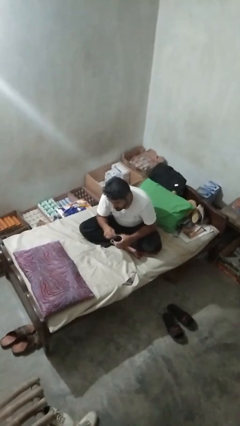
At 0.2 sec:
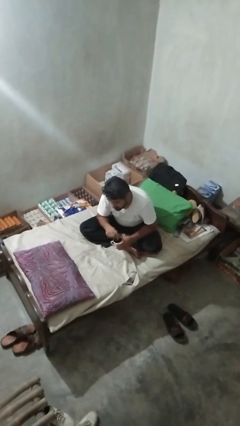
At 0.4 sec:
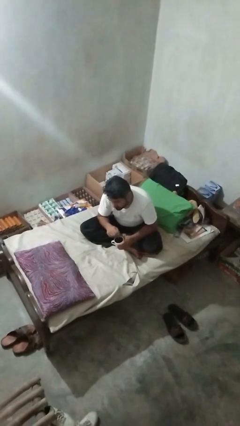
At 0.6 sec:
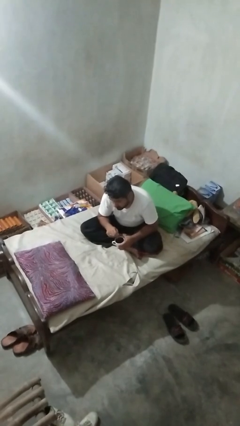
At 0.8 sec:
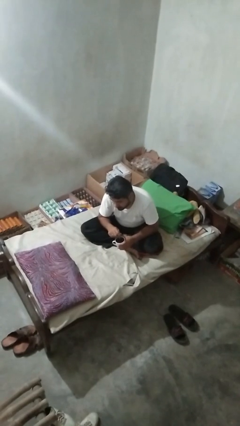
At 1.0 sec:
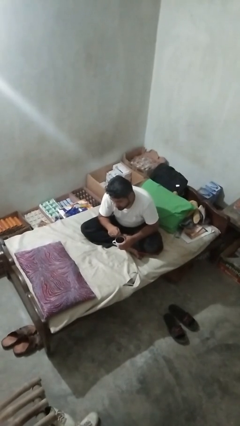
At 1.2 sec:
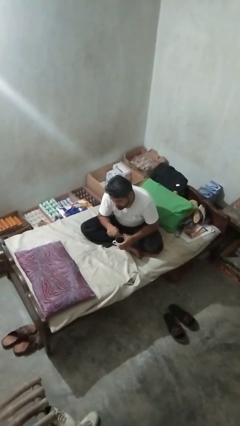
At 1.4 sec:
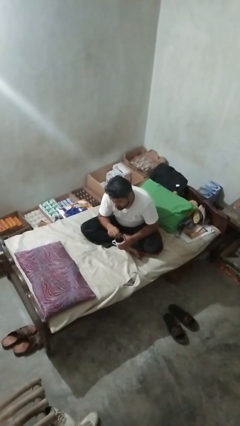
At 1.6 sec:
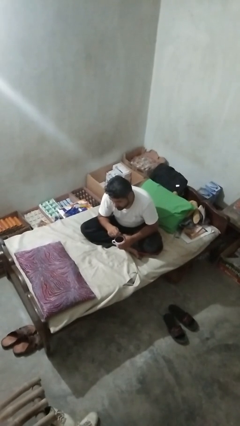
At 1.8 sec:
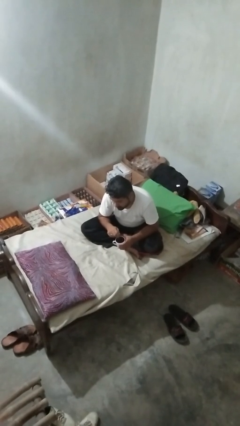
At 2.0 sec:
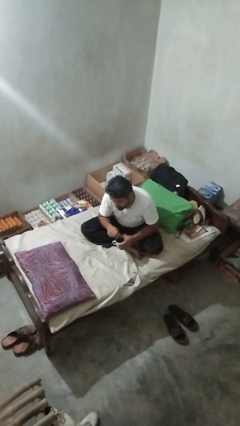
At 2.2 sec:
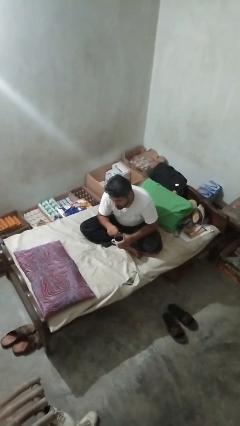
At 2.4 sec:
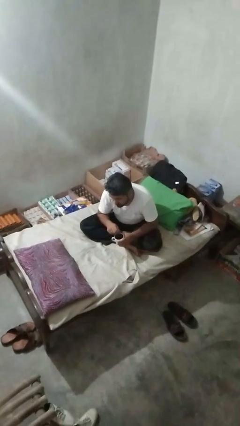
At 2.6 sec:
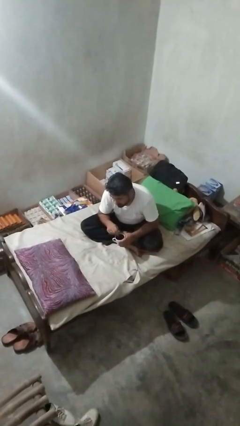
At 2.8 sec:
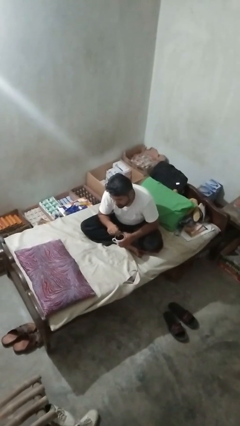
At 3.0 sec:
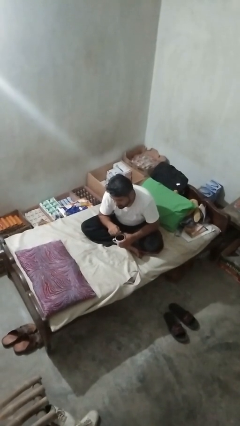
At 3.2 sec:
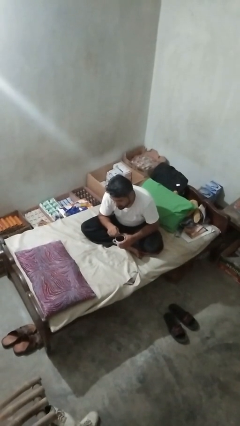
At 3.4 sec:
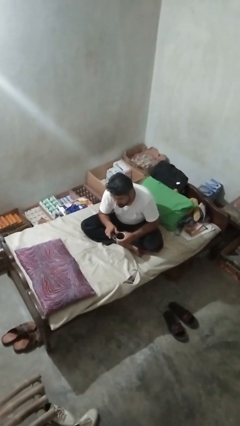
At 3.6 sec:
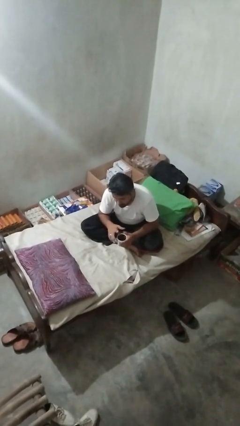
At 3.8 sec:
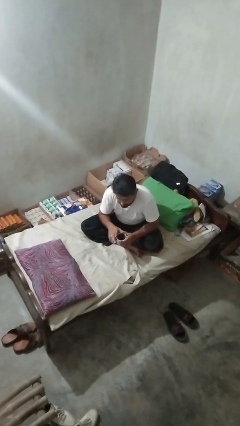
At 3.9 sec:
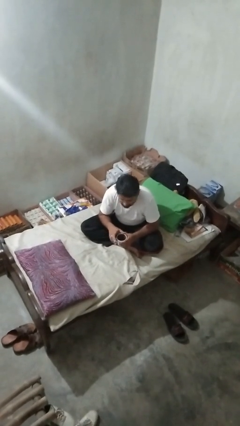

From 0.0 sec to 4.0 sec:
person stirs mug

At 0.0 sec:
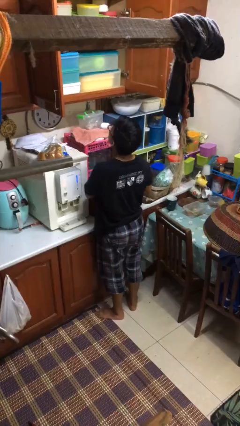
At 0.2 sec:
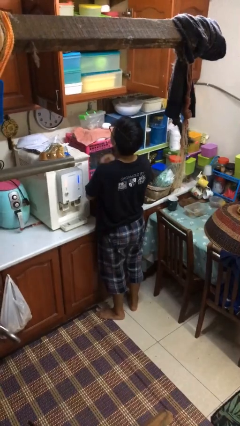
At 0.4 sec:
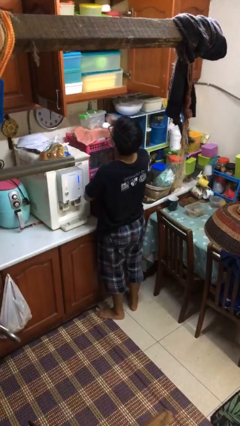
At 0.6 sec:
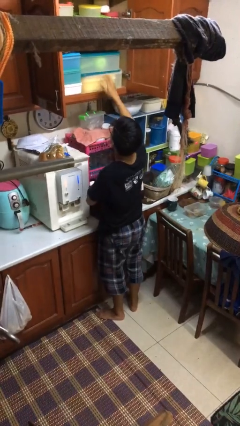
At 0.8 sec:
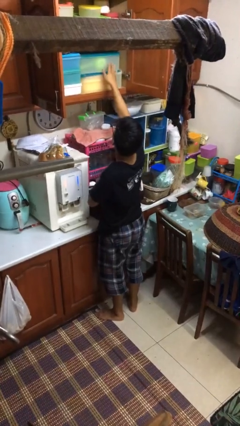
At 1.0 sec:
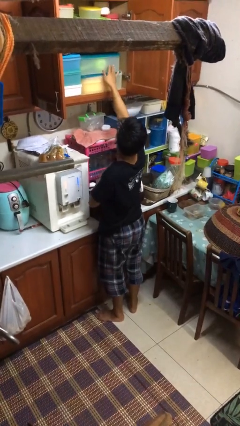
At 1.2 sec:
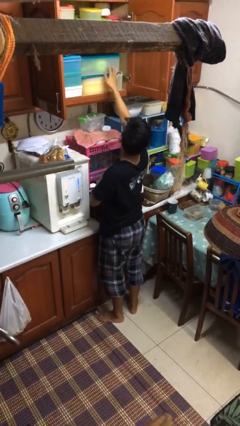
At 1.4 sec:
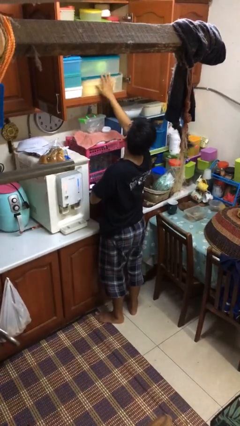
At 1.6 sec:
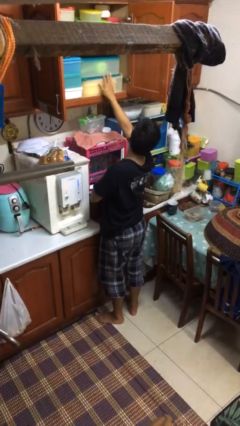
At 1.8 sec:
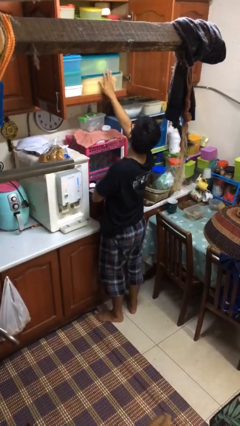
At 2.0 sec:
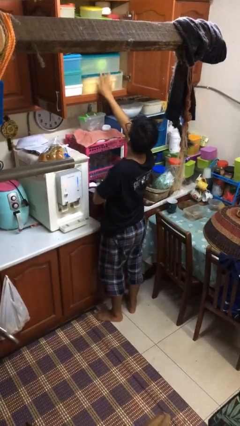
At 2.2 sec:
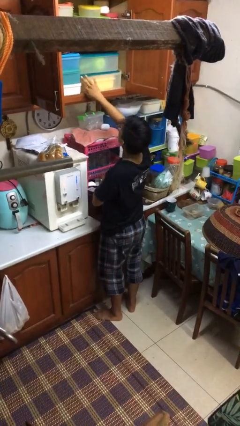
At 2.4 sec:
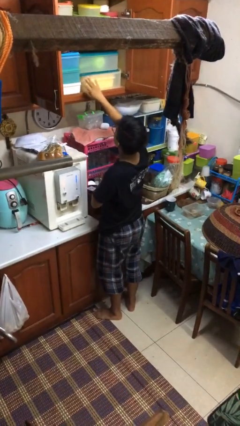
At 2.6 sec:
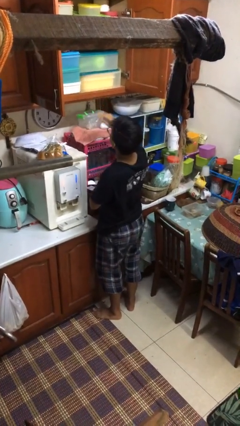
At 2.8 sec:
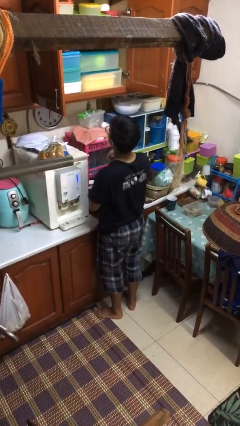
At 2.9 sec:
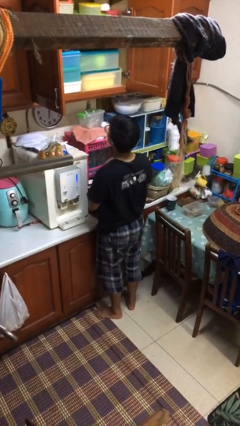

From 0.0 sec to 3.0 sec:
person searches in kitchen drawer

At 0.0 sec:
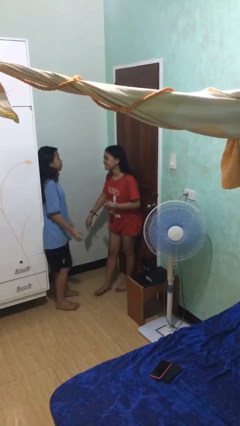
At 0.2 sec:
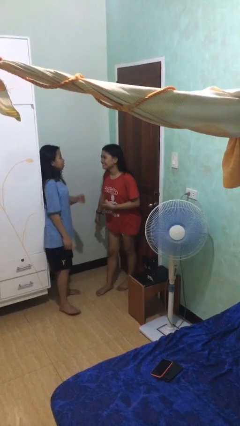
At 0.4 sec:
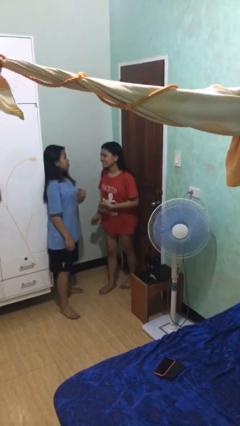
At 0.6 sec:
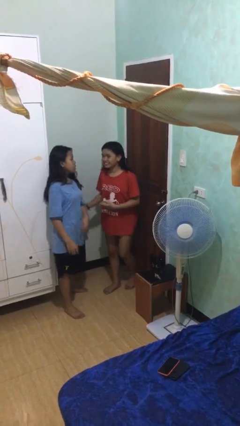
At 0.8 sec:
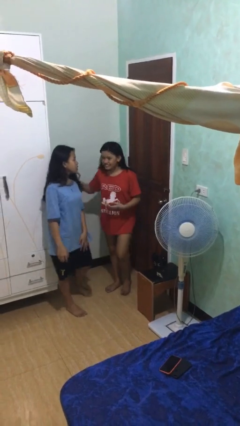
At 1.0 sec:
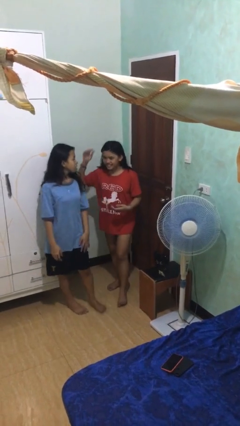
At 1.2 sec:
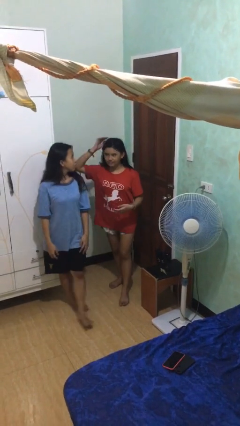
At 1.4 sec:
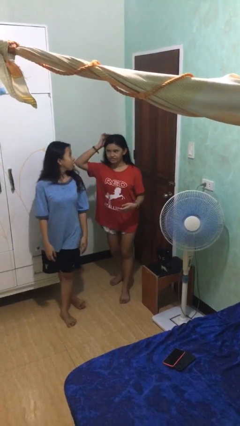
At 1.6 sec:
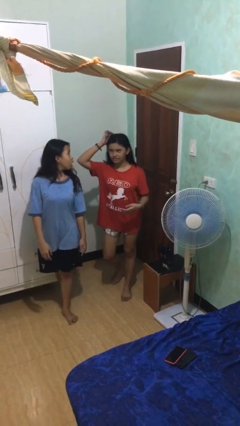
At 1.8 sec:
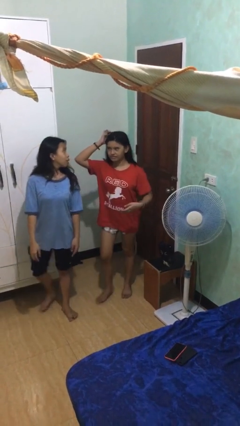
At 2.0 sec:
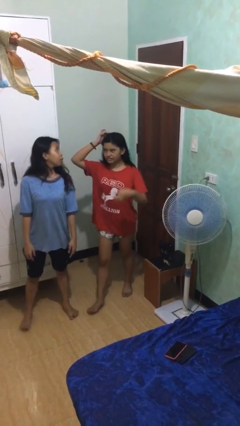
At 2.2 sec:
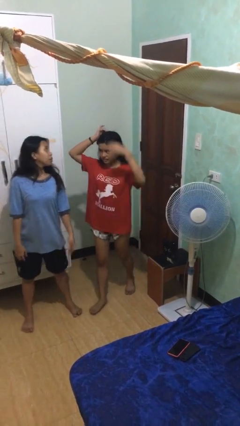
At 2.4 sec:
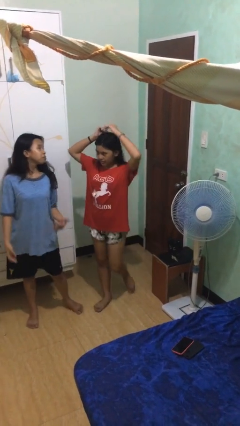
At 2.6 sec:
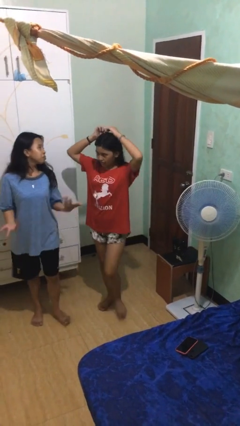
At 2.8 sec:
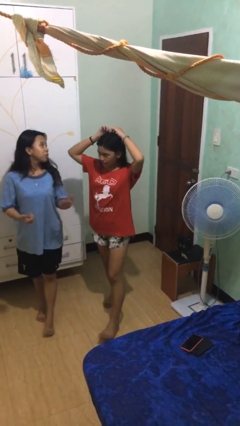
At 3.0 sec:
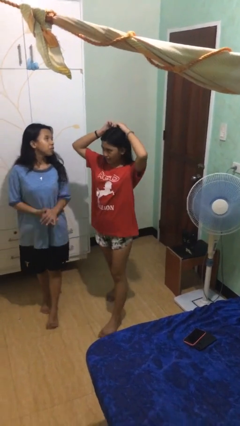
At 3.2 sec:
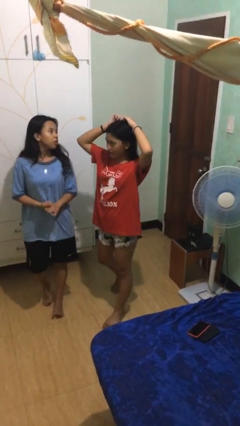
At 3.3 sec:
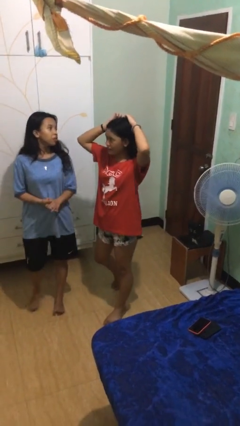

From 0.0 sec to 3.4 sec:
person talks to person

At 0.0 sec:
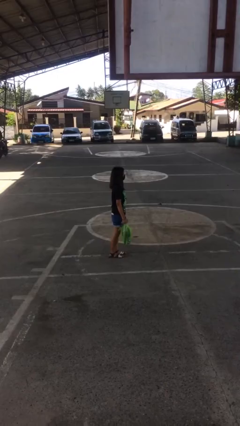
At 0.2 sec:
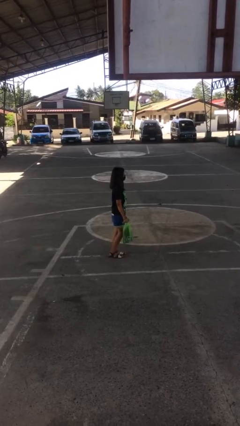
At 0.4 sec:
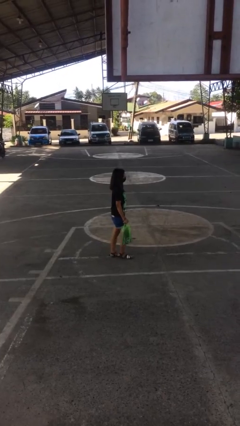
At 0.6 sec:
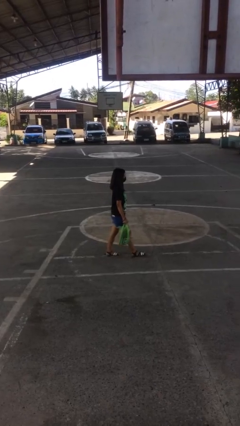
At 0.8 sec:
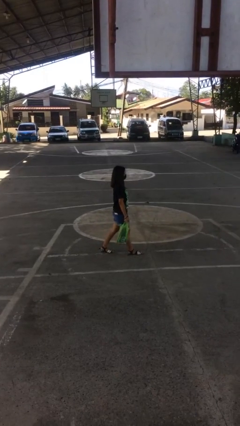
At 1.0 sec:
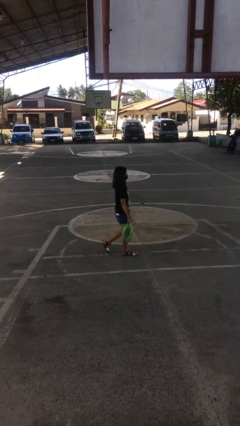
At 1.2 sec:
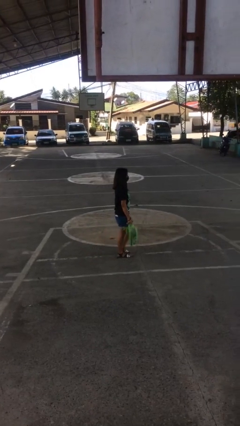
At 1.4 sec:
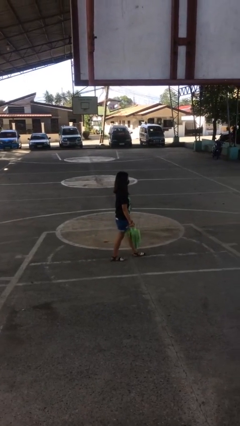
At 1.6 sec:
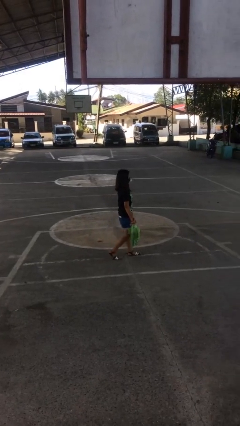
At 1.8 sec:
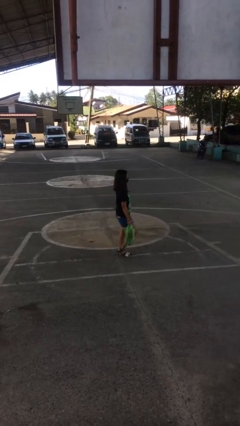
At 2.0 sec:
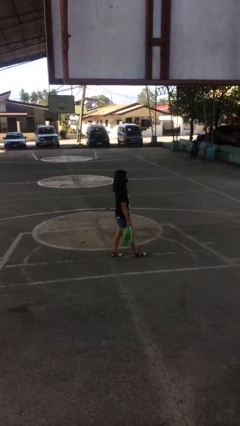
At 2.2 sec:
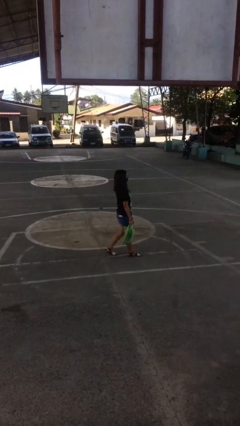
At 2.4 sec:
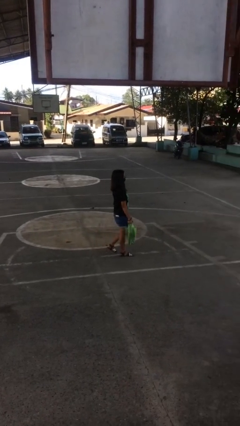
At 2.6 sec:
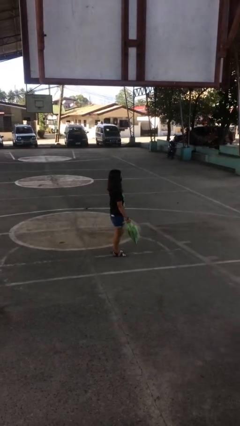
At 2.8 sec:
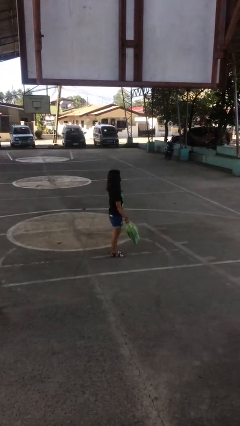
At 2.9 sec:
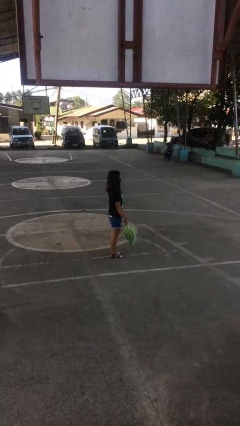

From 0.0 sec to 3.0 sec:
person carries groceries

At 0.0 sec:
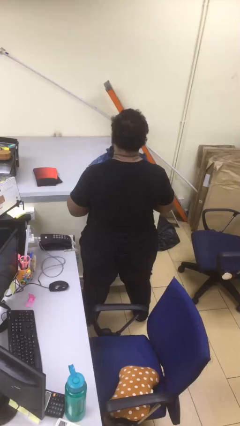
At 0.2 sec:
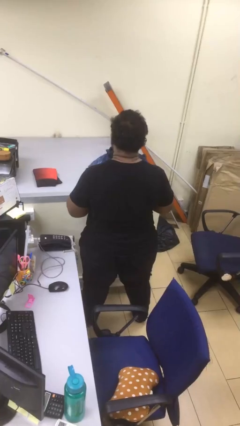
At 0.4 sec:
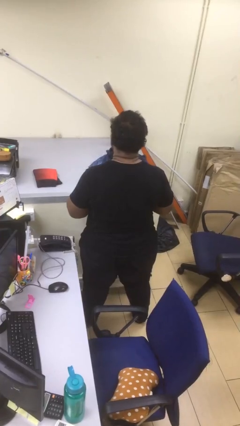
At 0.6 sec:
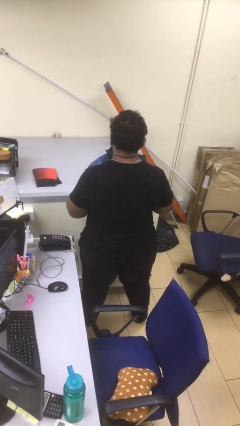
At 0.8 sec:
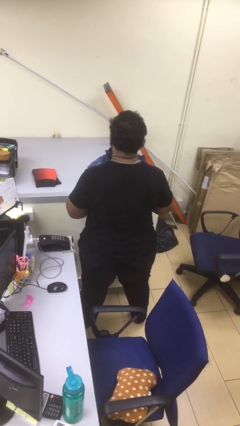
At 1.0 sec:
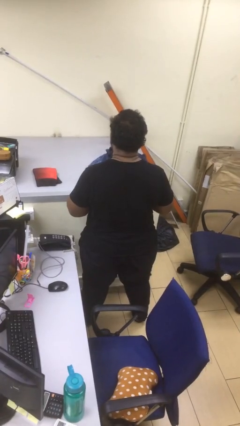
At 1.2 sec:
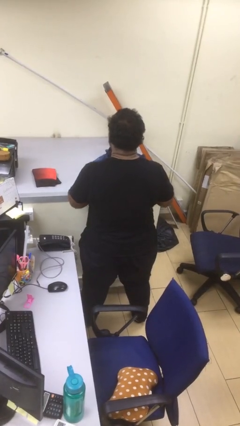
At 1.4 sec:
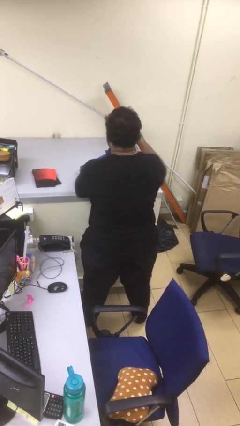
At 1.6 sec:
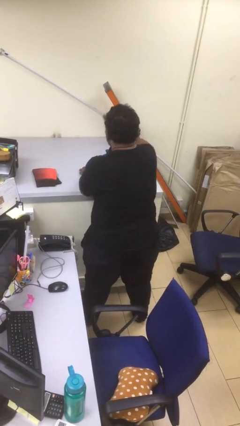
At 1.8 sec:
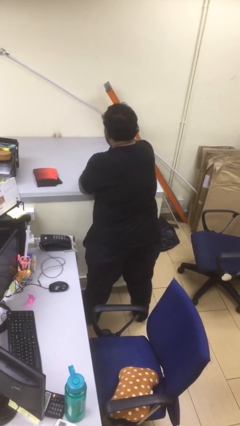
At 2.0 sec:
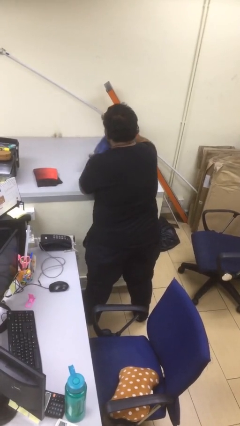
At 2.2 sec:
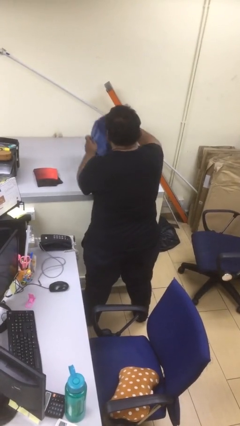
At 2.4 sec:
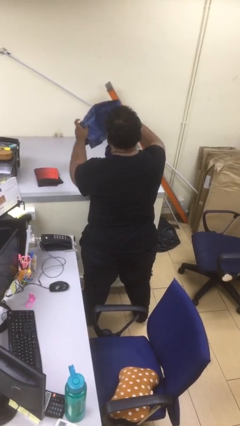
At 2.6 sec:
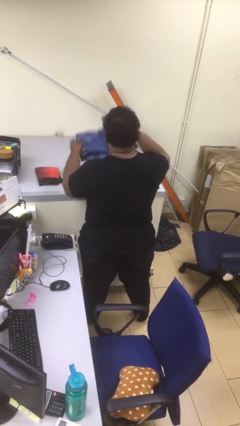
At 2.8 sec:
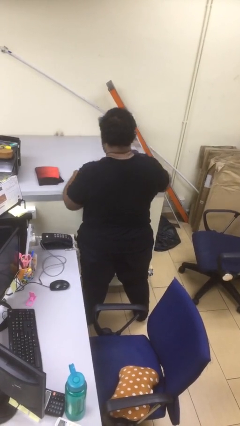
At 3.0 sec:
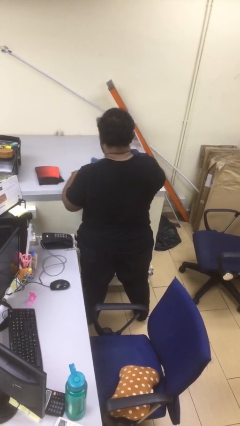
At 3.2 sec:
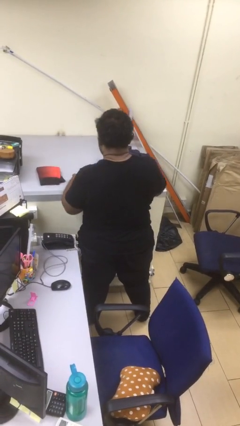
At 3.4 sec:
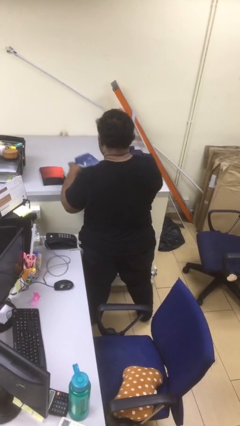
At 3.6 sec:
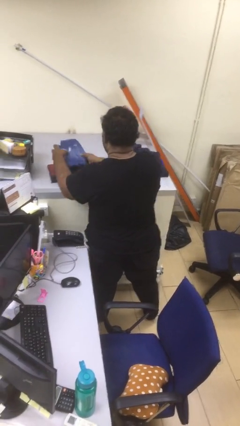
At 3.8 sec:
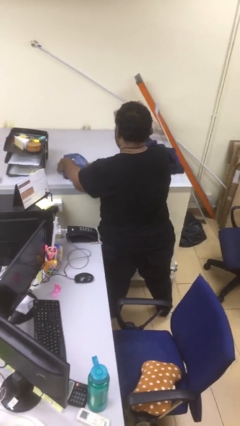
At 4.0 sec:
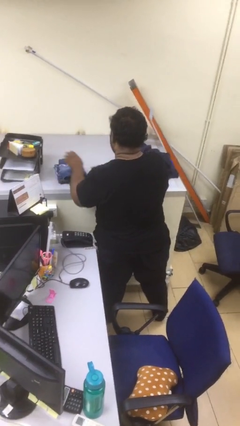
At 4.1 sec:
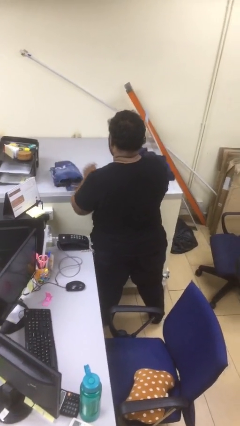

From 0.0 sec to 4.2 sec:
person folds pants
